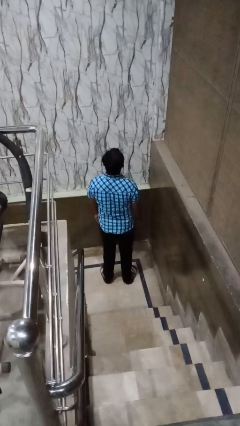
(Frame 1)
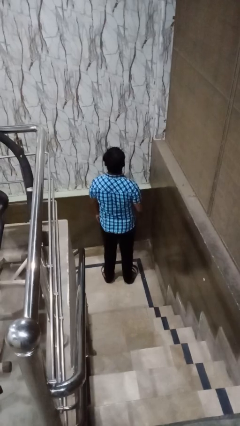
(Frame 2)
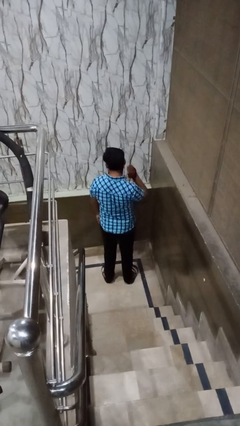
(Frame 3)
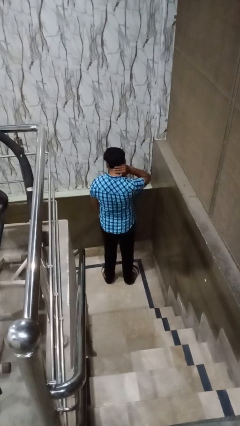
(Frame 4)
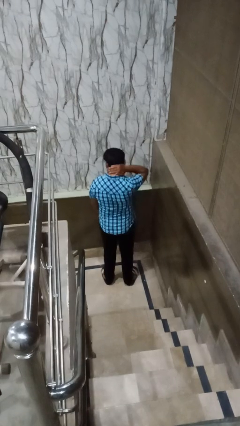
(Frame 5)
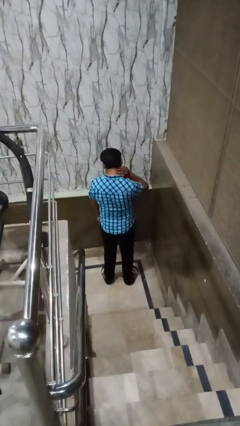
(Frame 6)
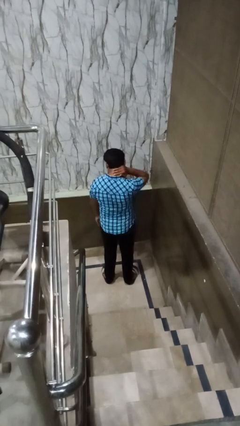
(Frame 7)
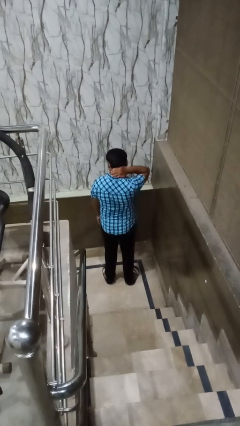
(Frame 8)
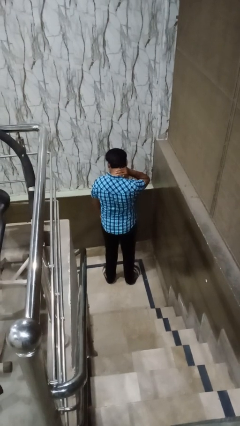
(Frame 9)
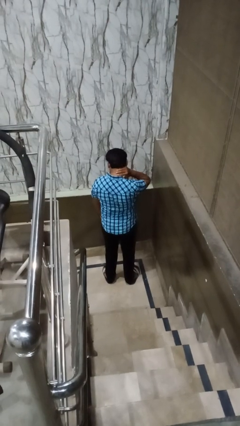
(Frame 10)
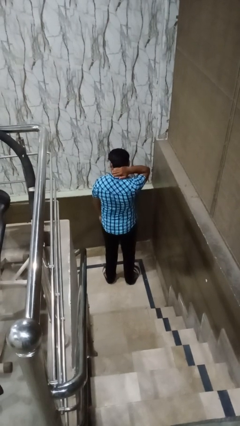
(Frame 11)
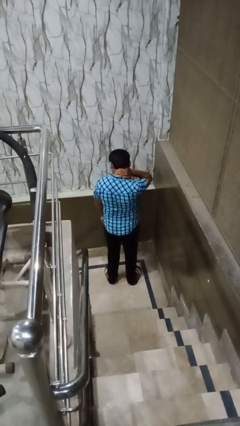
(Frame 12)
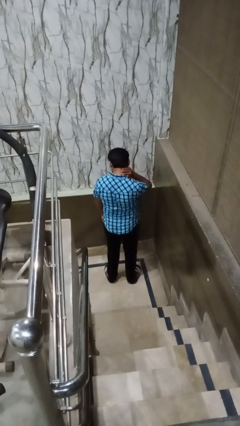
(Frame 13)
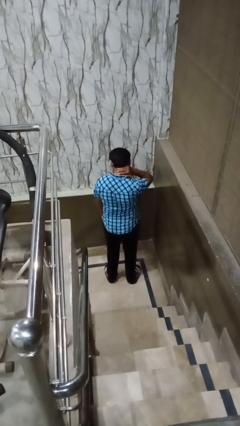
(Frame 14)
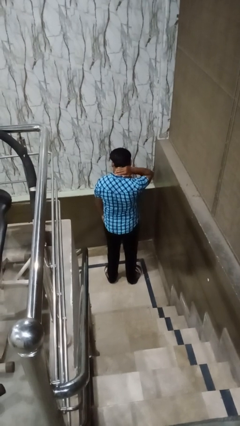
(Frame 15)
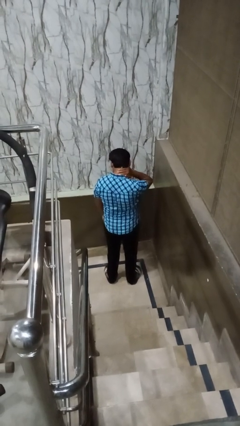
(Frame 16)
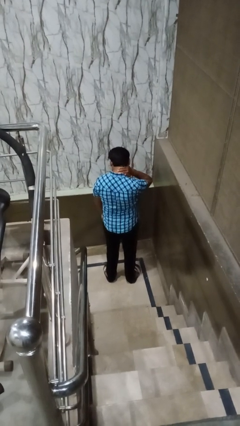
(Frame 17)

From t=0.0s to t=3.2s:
person rubs neck

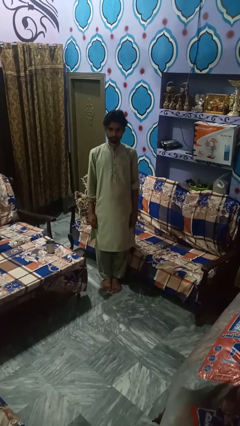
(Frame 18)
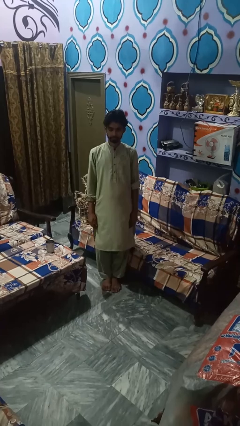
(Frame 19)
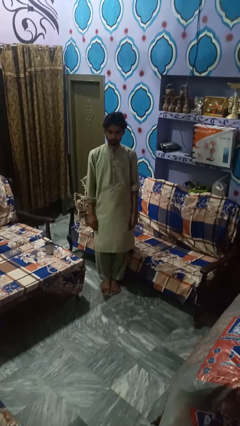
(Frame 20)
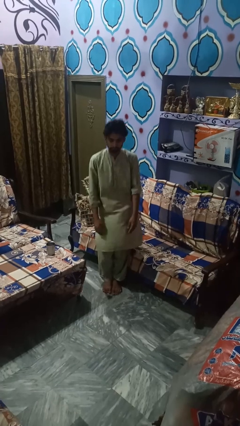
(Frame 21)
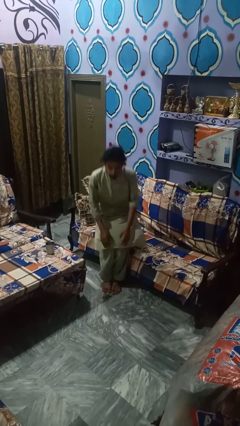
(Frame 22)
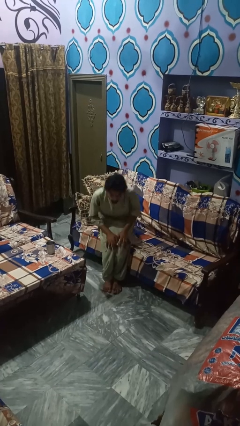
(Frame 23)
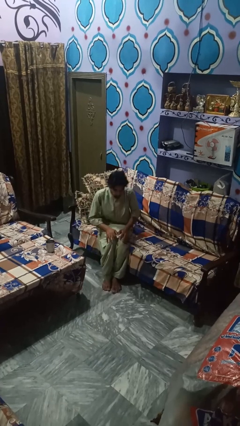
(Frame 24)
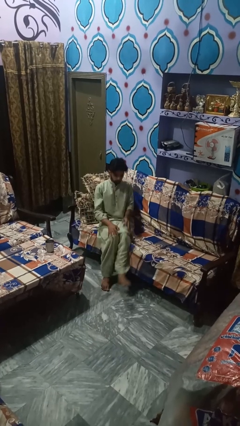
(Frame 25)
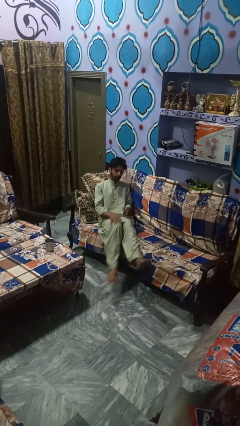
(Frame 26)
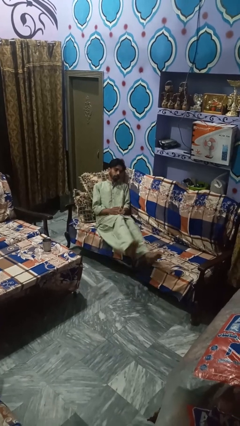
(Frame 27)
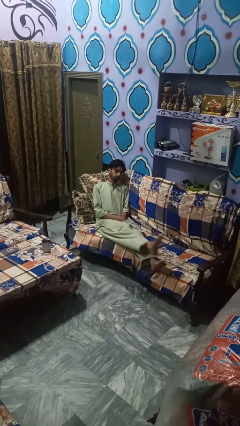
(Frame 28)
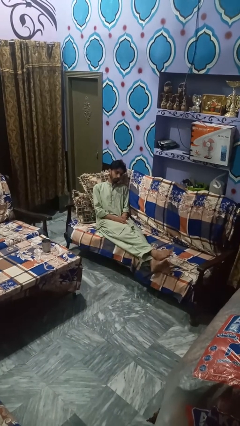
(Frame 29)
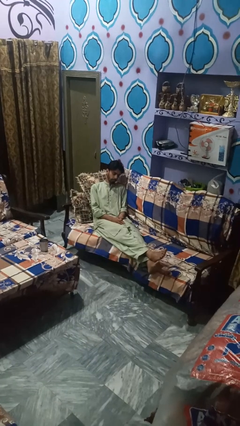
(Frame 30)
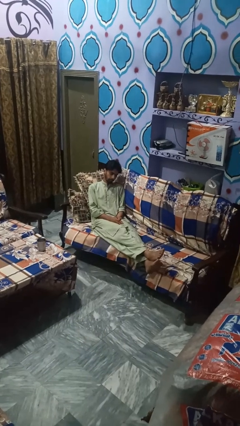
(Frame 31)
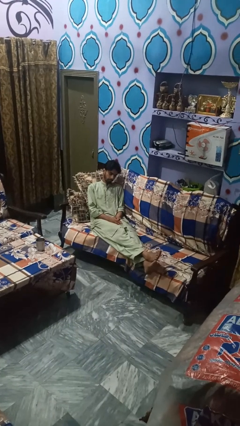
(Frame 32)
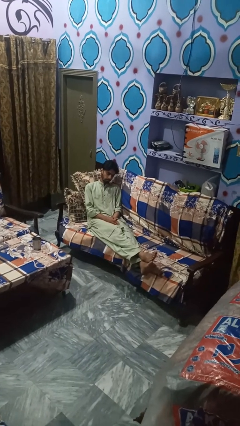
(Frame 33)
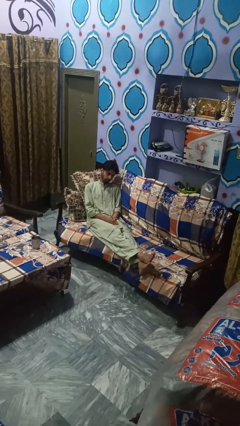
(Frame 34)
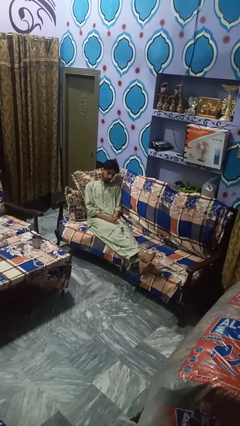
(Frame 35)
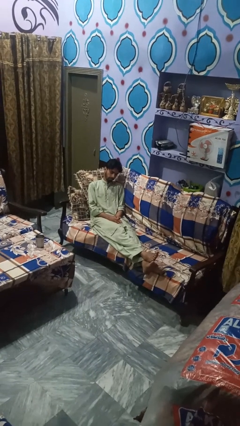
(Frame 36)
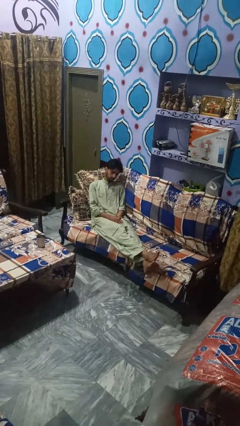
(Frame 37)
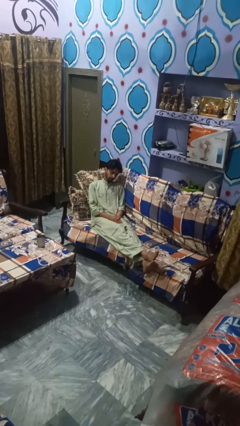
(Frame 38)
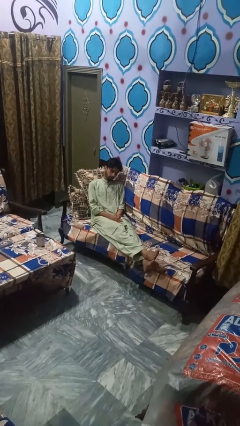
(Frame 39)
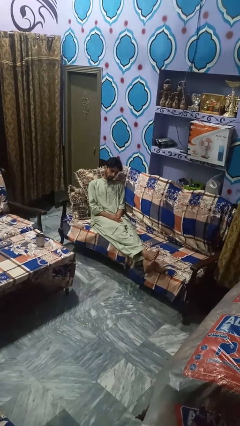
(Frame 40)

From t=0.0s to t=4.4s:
person lies down on couch

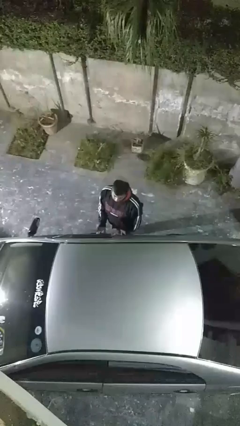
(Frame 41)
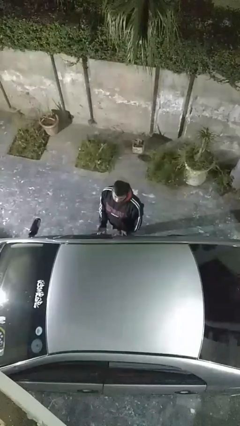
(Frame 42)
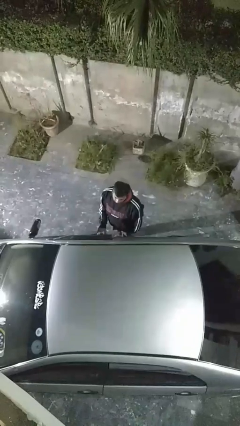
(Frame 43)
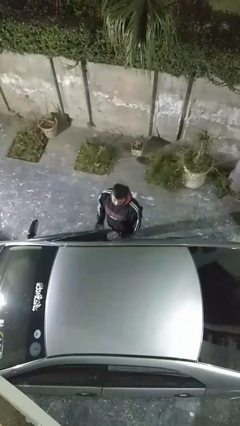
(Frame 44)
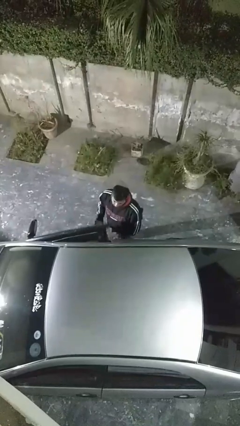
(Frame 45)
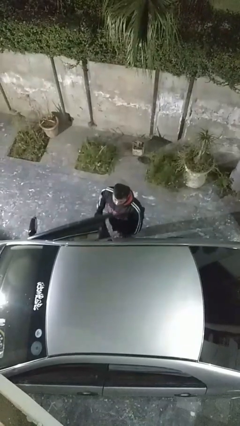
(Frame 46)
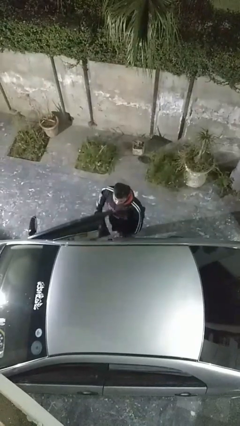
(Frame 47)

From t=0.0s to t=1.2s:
person opens car door

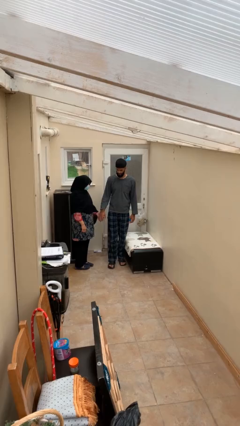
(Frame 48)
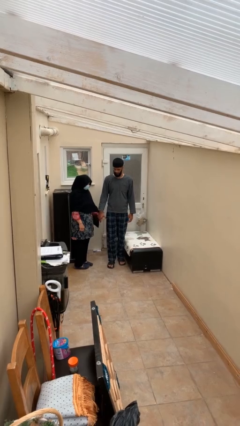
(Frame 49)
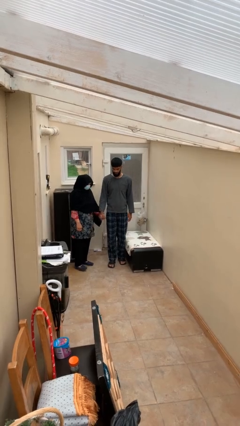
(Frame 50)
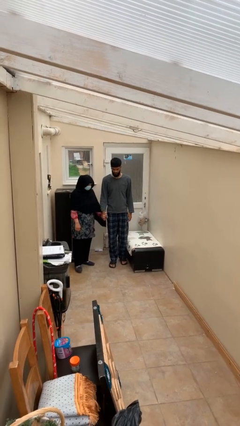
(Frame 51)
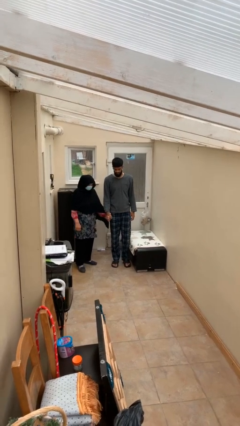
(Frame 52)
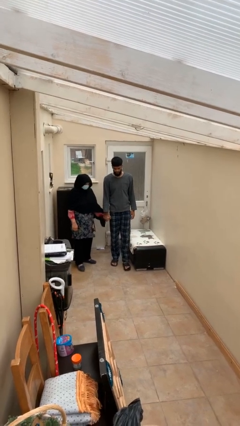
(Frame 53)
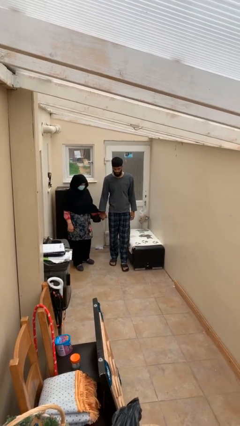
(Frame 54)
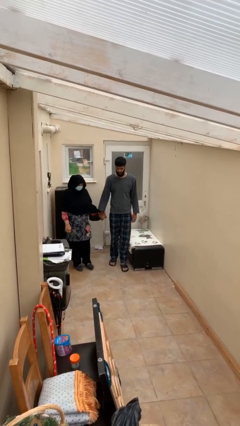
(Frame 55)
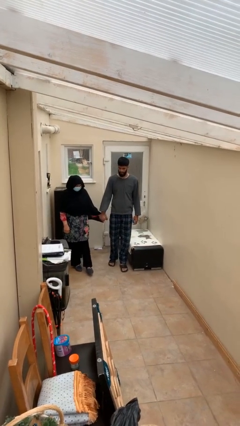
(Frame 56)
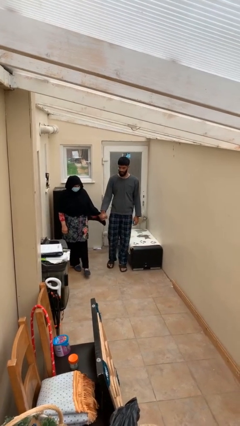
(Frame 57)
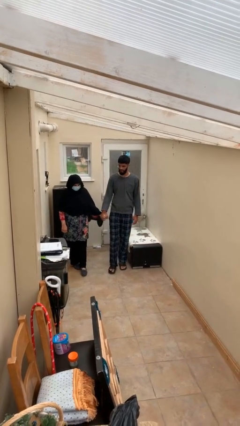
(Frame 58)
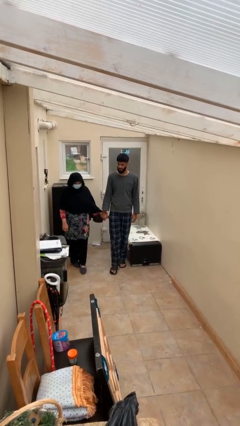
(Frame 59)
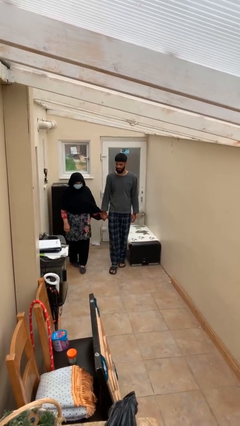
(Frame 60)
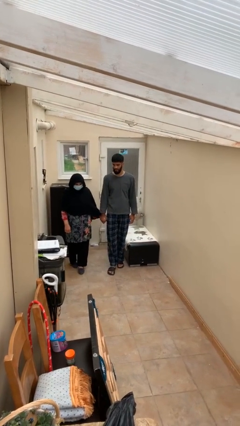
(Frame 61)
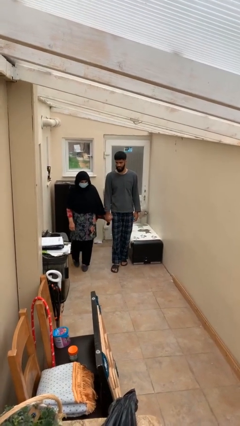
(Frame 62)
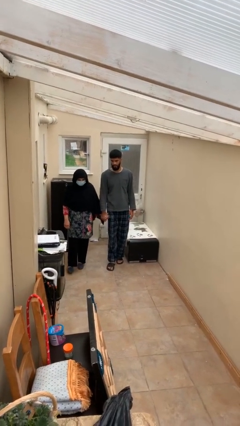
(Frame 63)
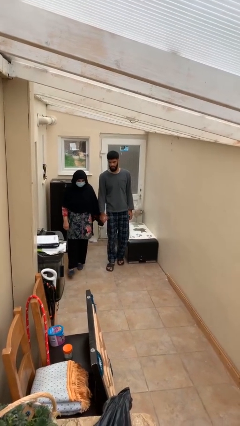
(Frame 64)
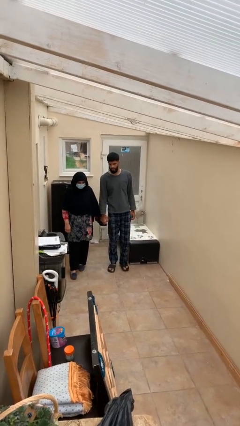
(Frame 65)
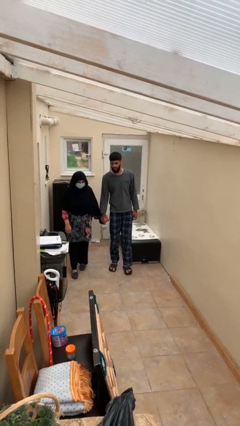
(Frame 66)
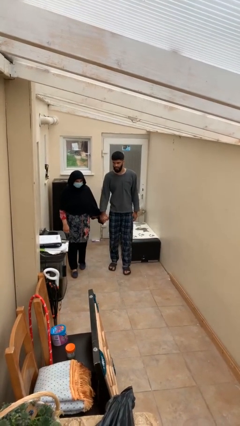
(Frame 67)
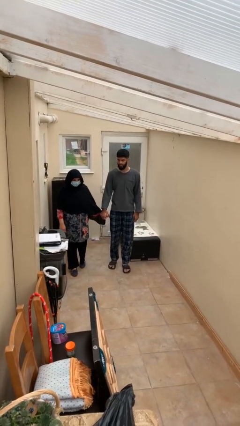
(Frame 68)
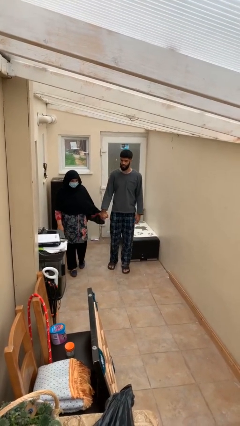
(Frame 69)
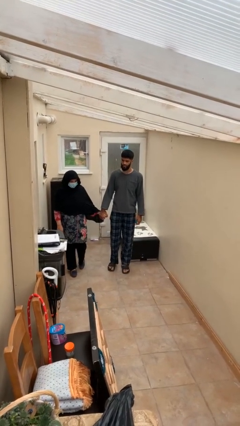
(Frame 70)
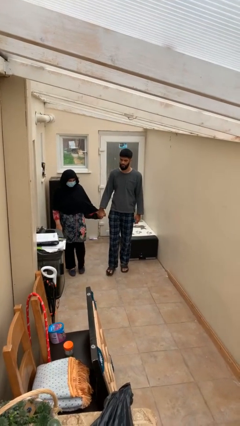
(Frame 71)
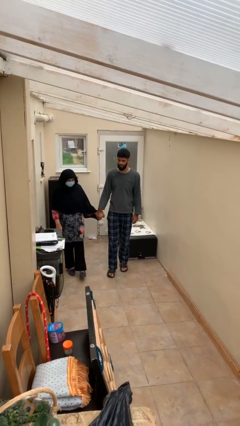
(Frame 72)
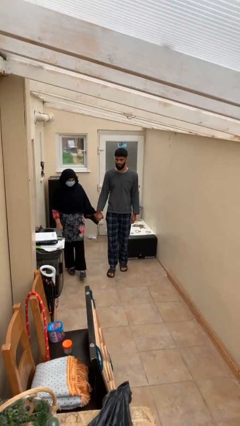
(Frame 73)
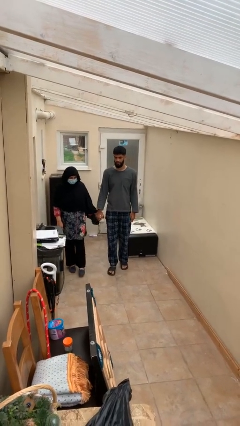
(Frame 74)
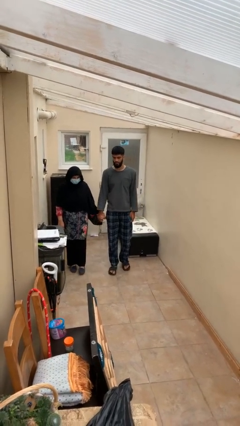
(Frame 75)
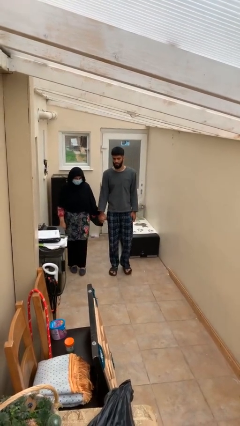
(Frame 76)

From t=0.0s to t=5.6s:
person holds hand

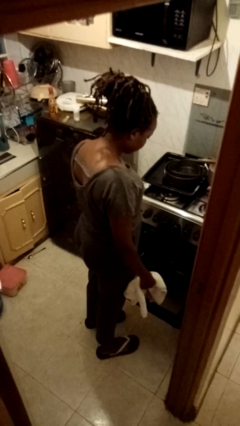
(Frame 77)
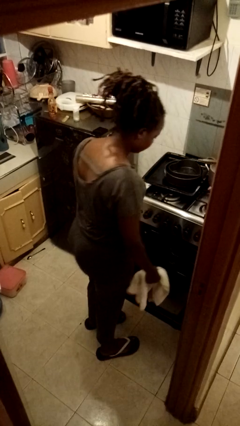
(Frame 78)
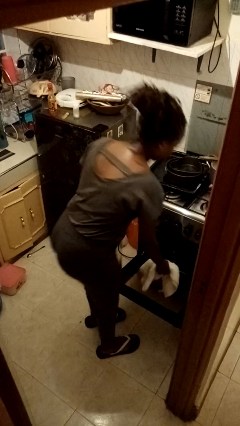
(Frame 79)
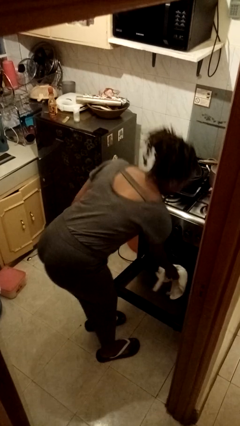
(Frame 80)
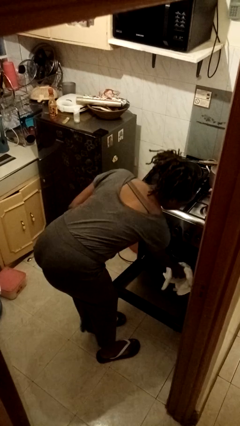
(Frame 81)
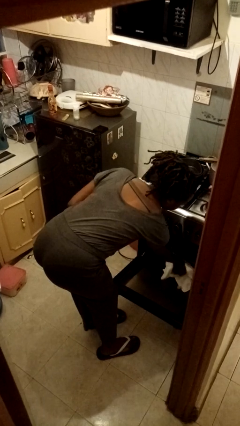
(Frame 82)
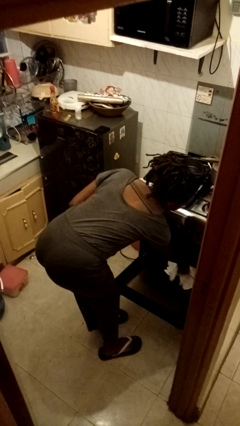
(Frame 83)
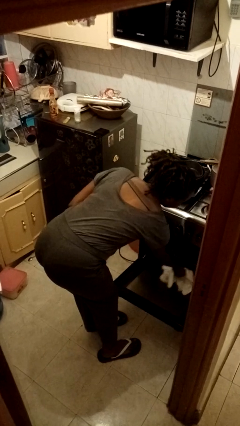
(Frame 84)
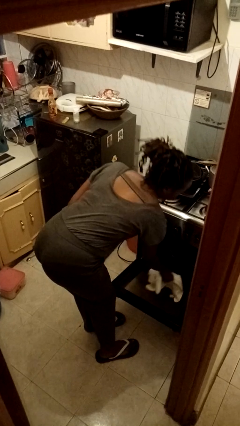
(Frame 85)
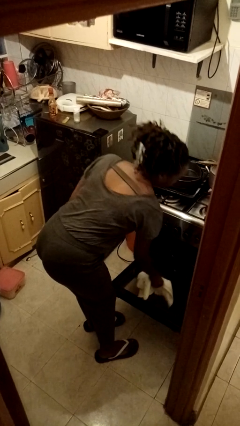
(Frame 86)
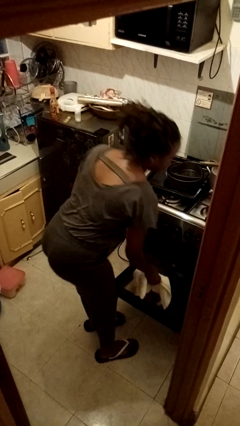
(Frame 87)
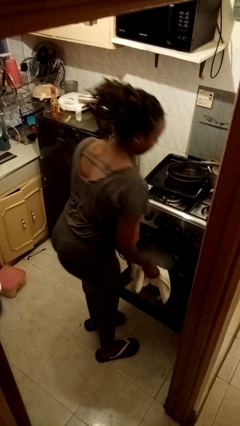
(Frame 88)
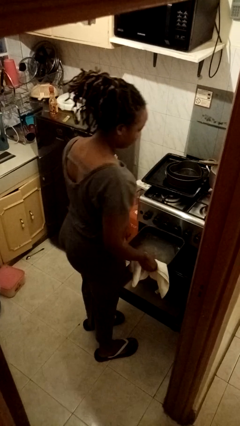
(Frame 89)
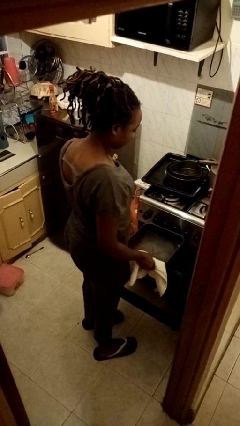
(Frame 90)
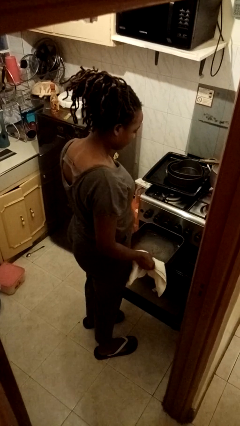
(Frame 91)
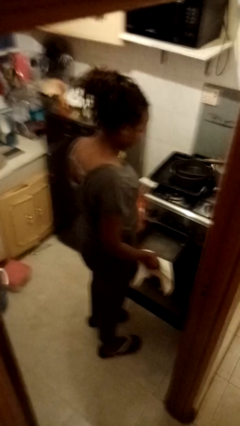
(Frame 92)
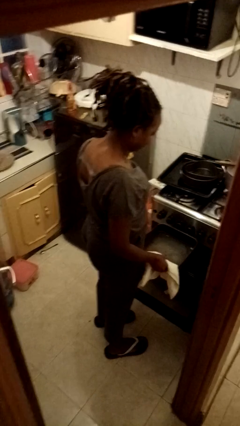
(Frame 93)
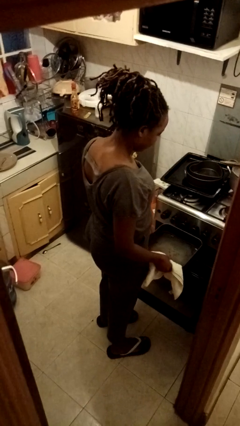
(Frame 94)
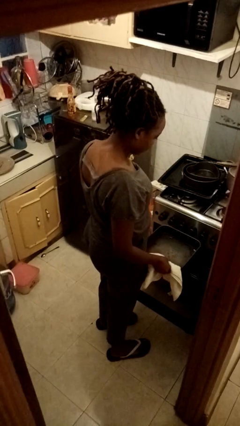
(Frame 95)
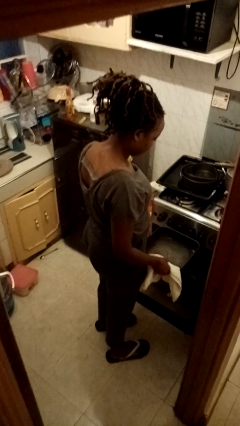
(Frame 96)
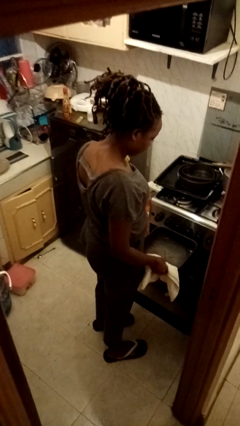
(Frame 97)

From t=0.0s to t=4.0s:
person takes object from oven
